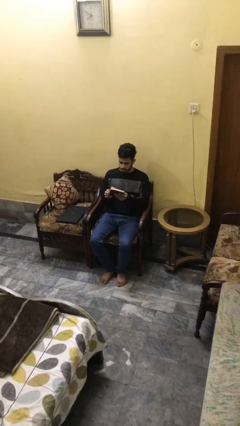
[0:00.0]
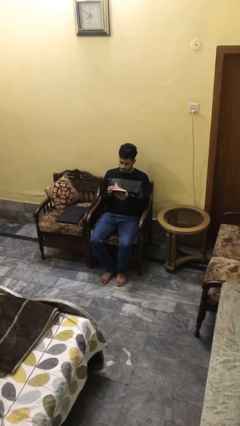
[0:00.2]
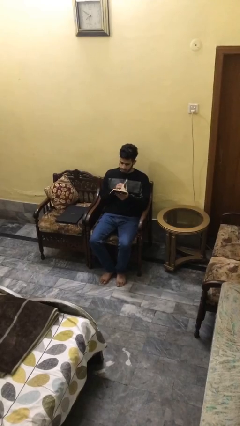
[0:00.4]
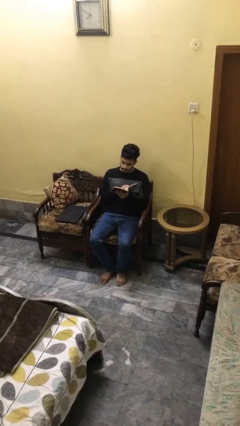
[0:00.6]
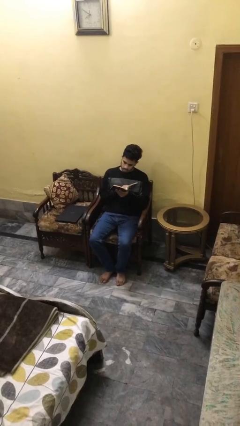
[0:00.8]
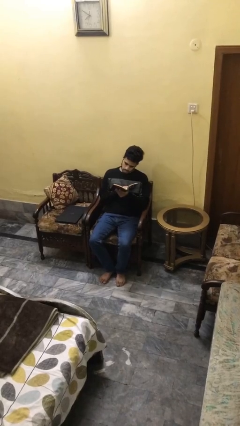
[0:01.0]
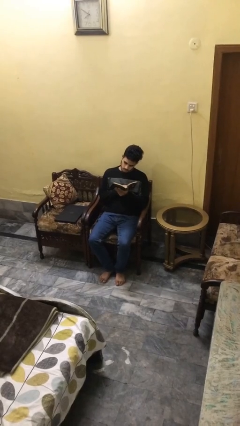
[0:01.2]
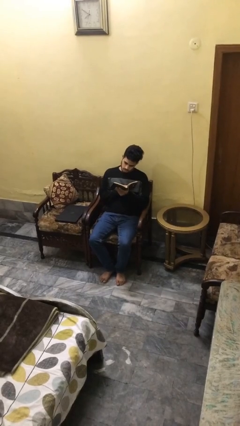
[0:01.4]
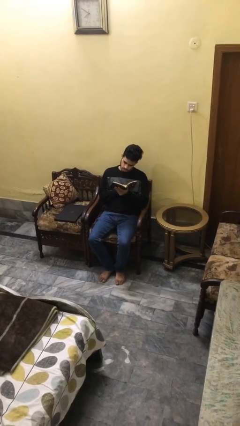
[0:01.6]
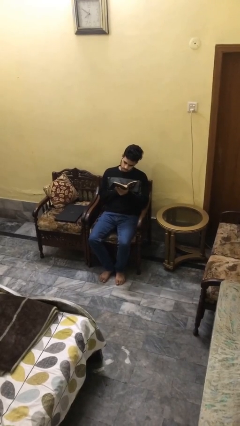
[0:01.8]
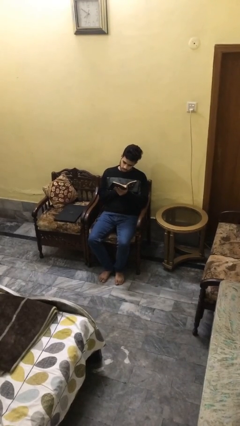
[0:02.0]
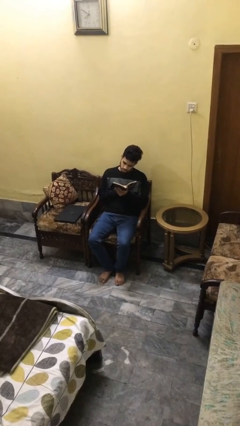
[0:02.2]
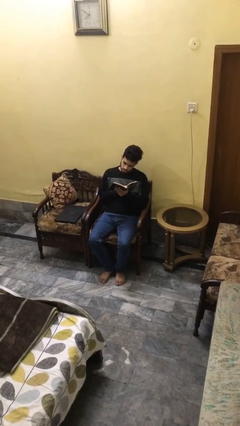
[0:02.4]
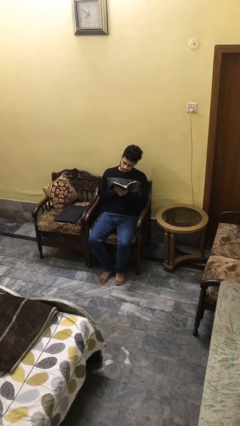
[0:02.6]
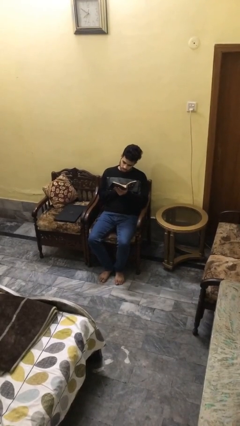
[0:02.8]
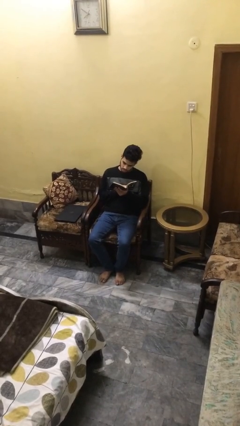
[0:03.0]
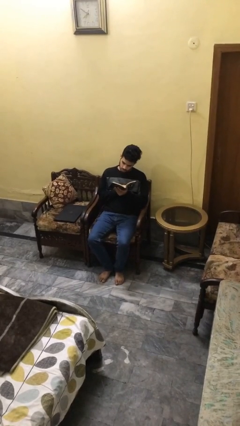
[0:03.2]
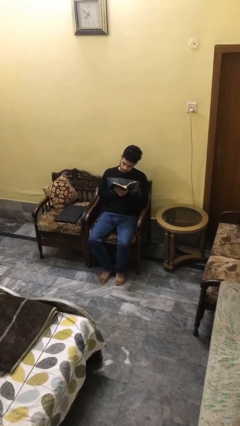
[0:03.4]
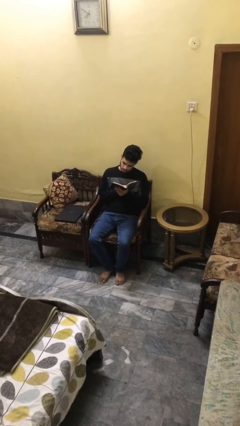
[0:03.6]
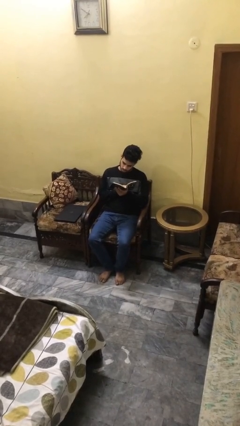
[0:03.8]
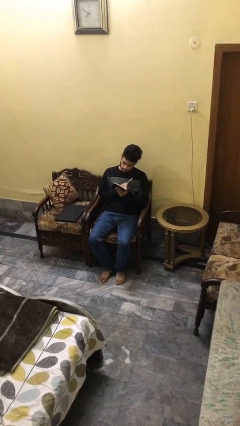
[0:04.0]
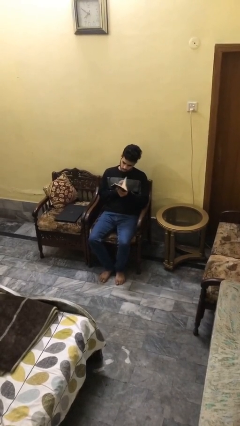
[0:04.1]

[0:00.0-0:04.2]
person reads document

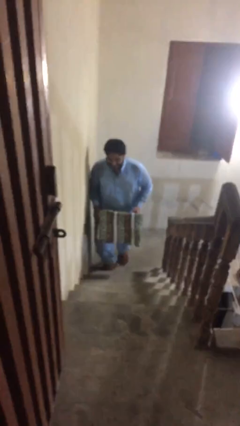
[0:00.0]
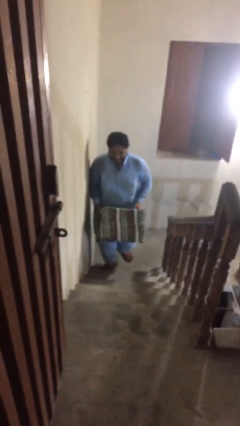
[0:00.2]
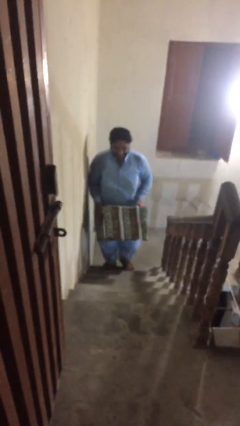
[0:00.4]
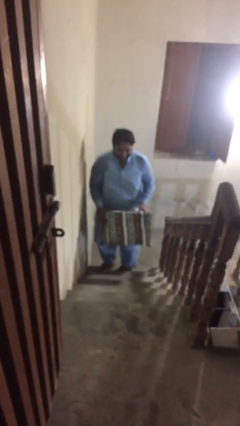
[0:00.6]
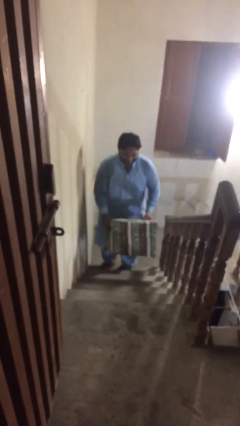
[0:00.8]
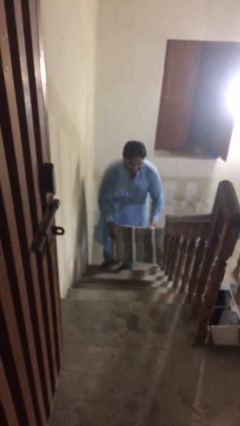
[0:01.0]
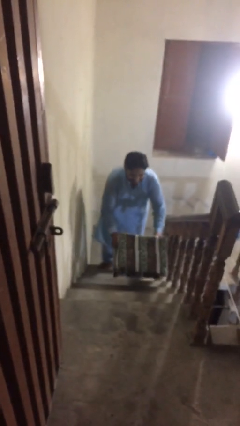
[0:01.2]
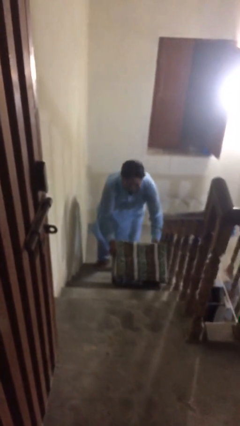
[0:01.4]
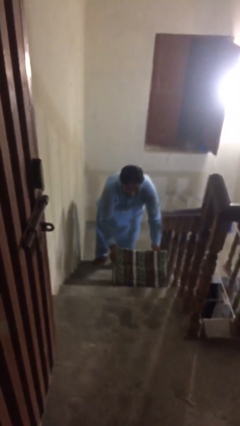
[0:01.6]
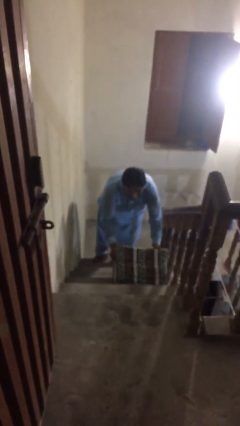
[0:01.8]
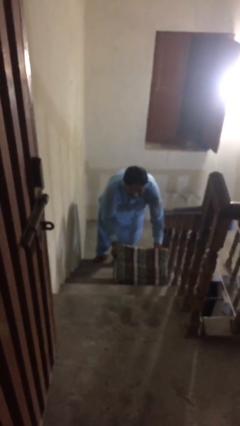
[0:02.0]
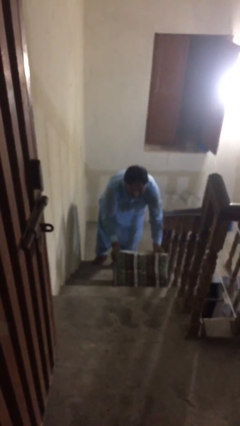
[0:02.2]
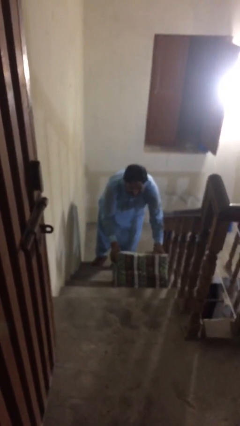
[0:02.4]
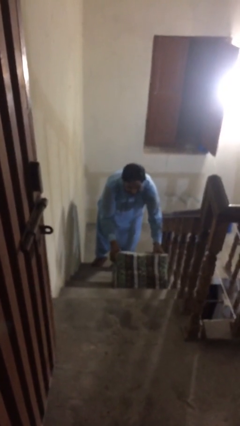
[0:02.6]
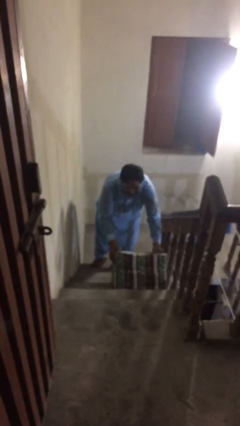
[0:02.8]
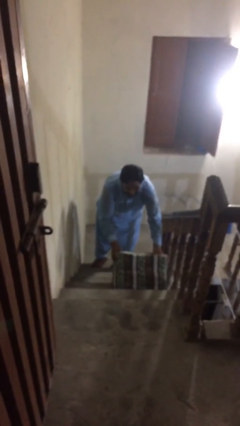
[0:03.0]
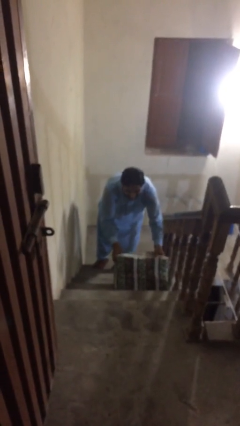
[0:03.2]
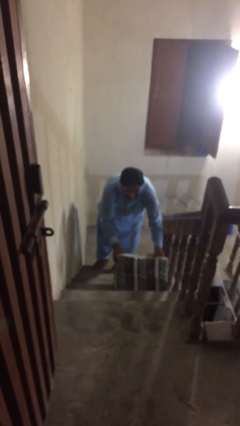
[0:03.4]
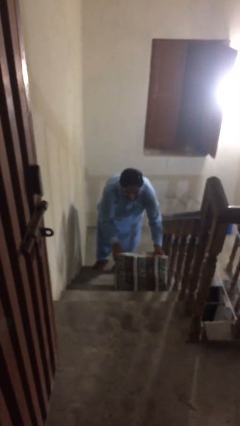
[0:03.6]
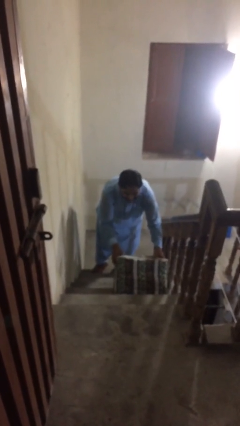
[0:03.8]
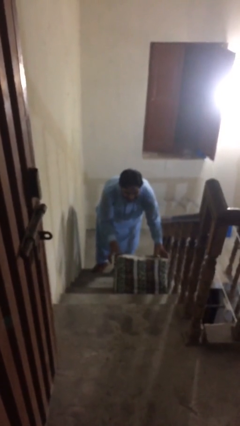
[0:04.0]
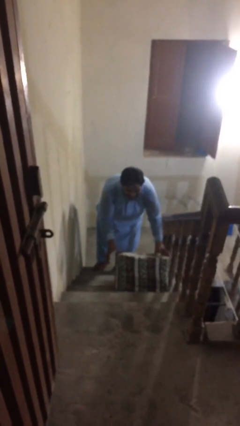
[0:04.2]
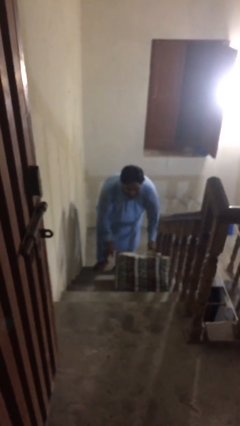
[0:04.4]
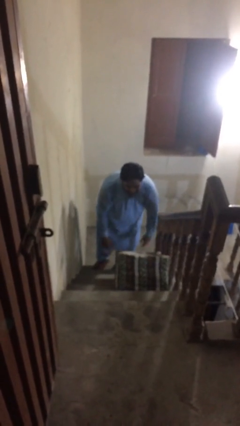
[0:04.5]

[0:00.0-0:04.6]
person puts down object on floor

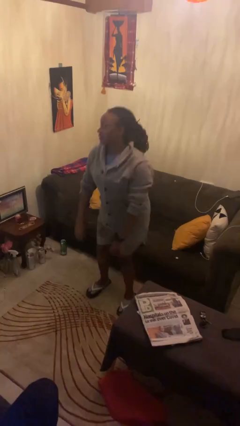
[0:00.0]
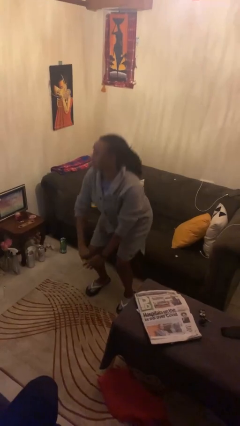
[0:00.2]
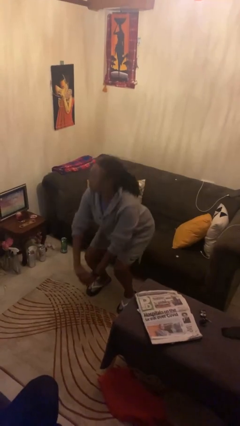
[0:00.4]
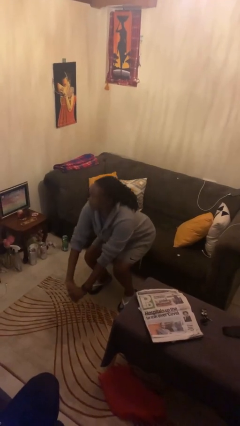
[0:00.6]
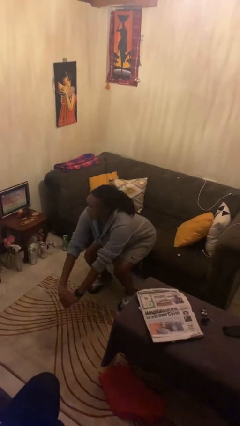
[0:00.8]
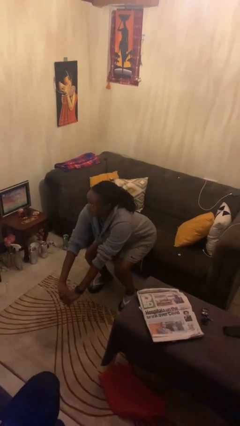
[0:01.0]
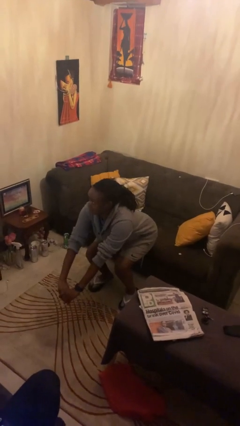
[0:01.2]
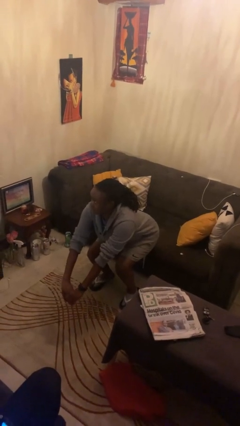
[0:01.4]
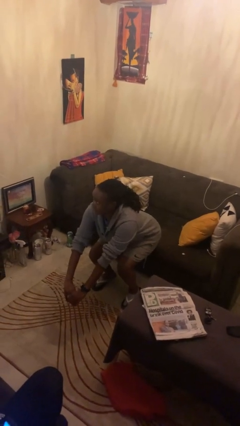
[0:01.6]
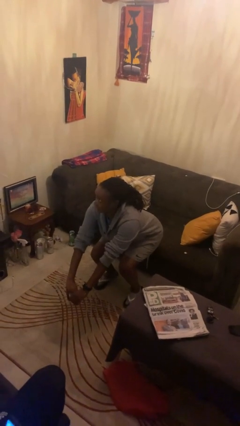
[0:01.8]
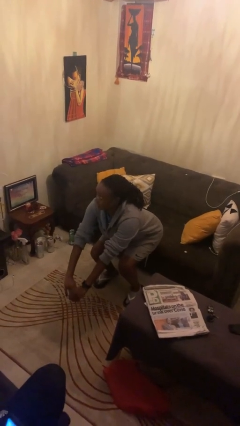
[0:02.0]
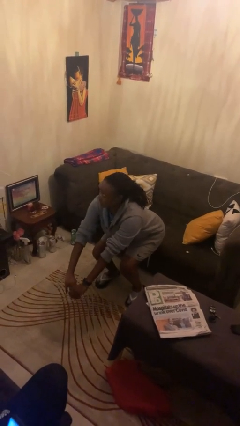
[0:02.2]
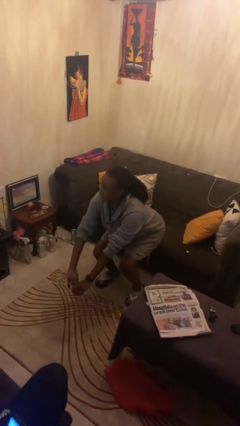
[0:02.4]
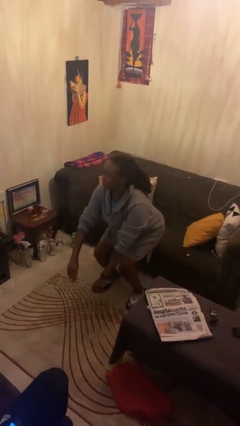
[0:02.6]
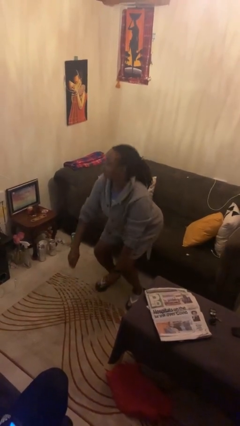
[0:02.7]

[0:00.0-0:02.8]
person squats

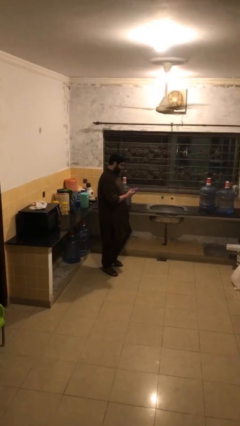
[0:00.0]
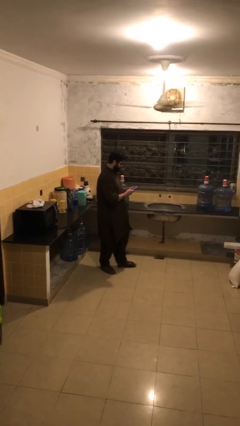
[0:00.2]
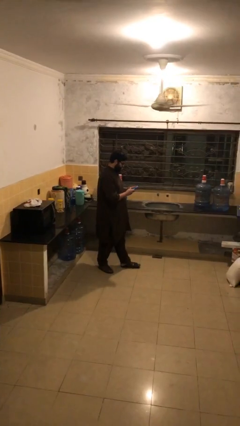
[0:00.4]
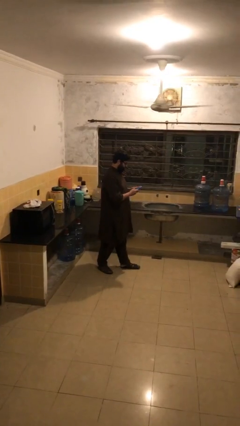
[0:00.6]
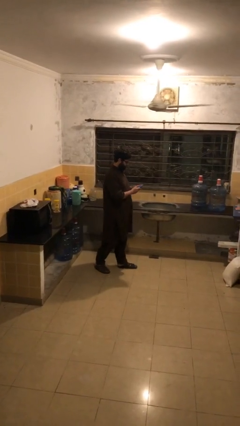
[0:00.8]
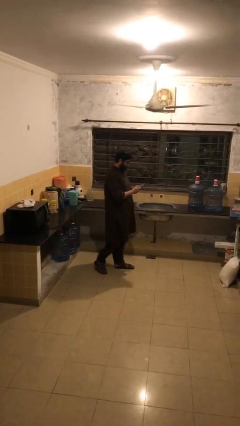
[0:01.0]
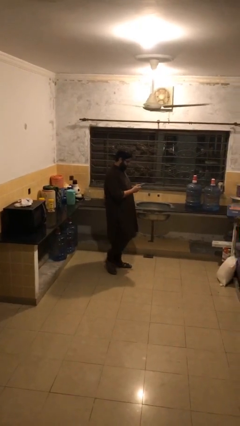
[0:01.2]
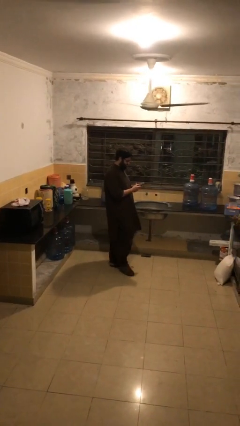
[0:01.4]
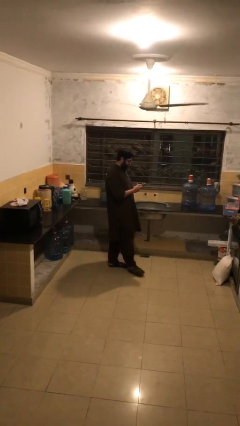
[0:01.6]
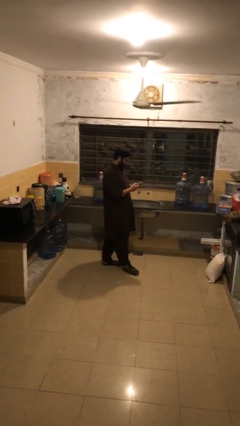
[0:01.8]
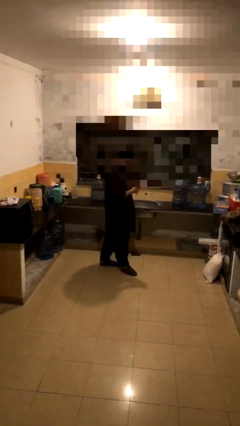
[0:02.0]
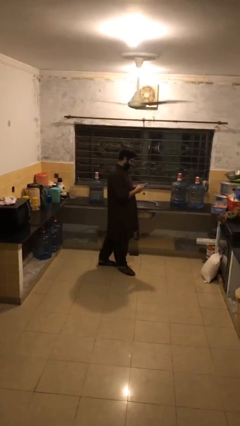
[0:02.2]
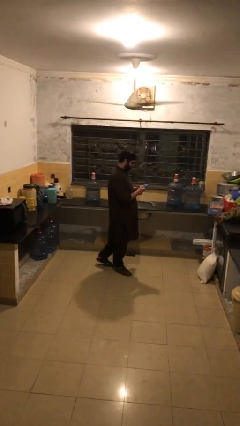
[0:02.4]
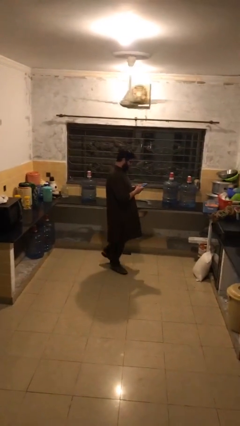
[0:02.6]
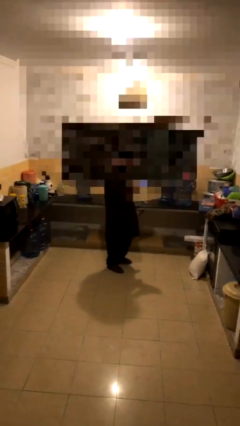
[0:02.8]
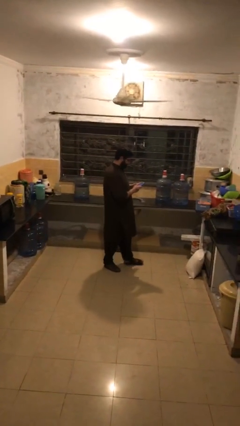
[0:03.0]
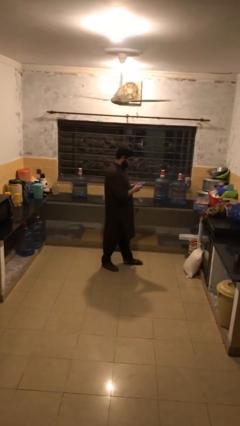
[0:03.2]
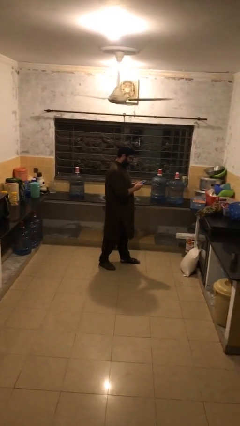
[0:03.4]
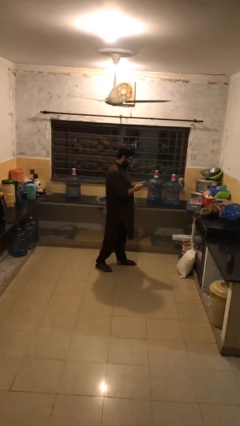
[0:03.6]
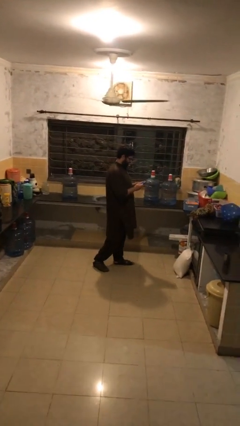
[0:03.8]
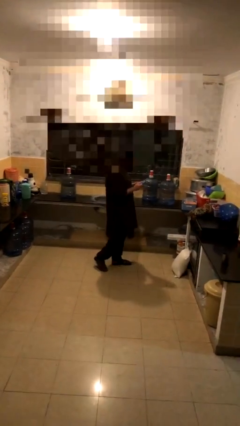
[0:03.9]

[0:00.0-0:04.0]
person texts on phone

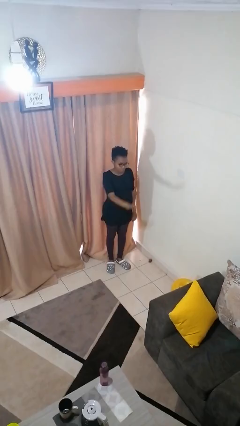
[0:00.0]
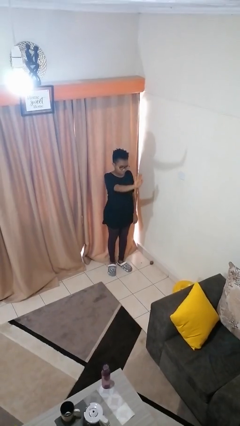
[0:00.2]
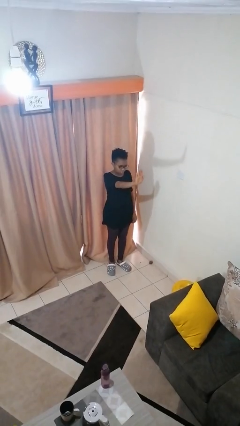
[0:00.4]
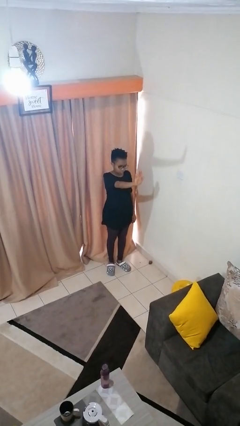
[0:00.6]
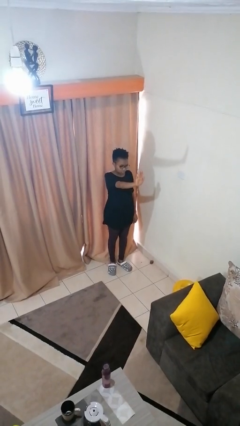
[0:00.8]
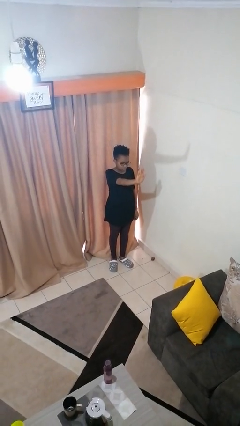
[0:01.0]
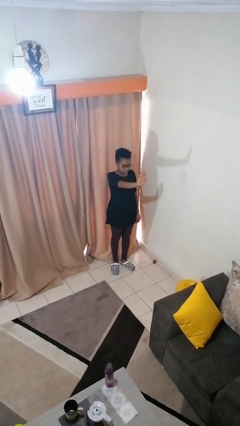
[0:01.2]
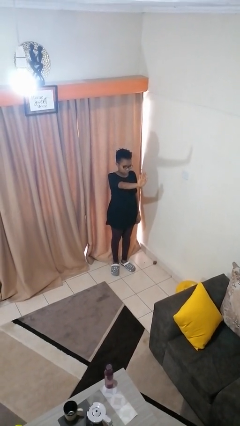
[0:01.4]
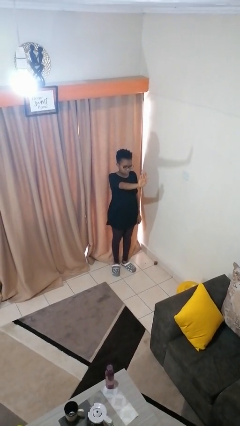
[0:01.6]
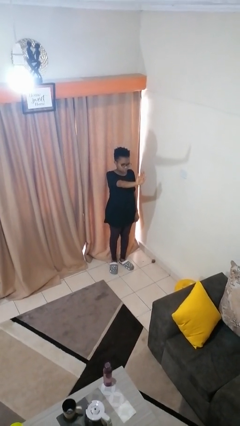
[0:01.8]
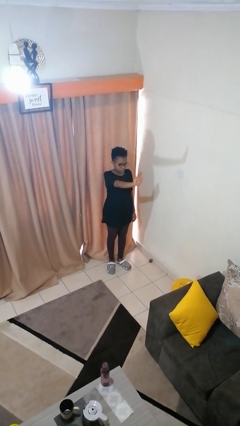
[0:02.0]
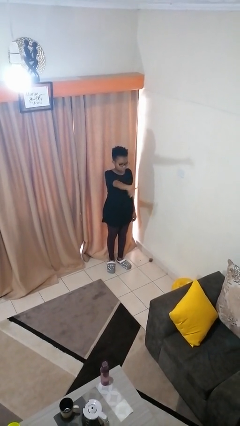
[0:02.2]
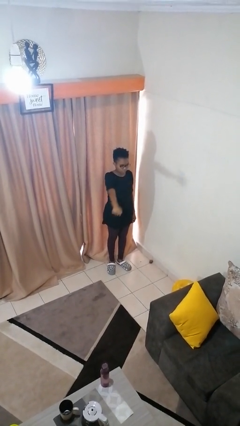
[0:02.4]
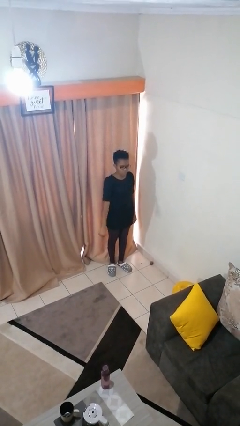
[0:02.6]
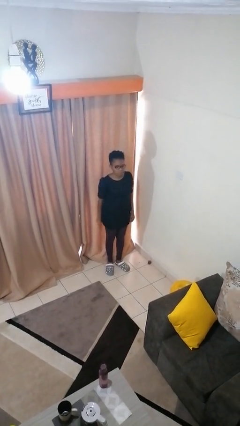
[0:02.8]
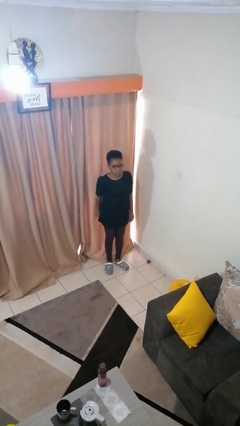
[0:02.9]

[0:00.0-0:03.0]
person gestures stop
